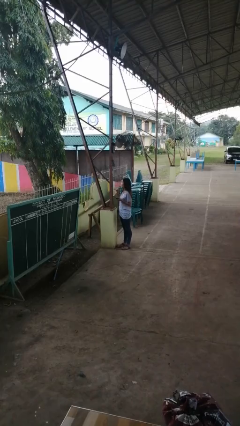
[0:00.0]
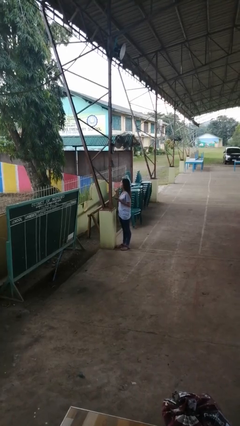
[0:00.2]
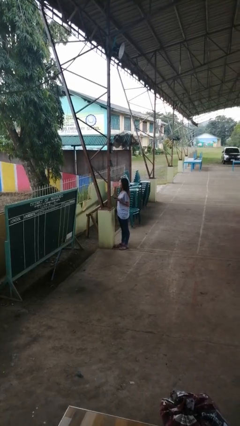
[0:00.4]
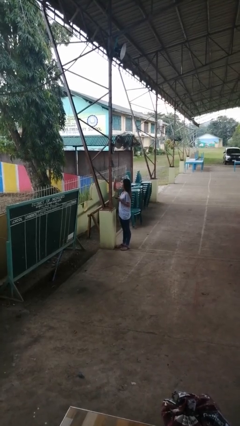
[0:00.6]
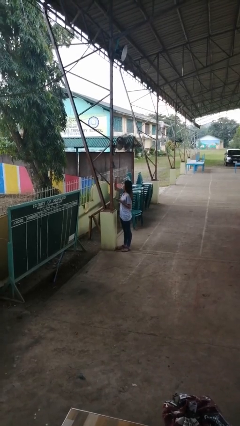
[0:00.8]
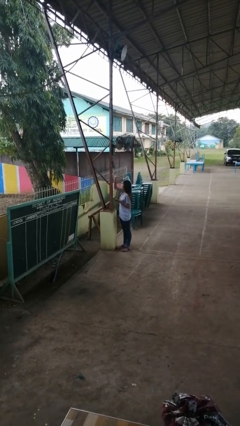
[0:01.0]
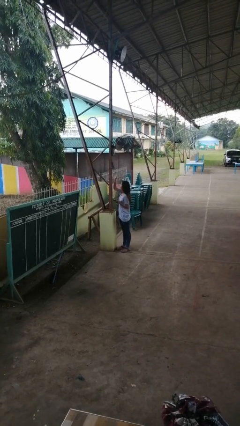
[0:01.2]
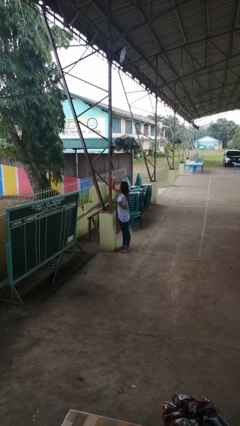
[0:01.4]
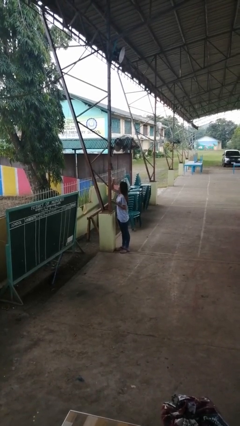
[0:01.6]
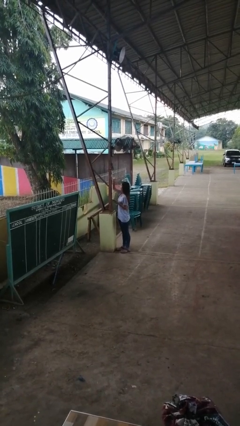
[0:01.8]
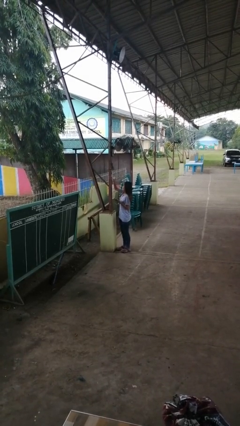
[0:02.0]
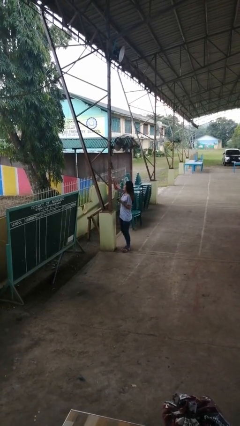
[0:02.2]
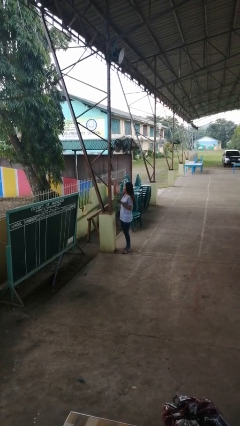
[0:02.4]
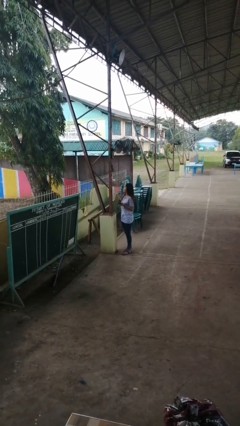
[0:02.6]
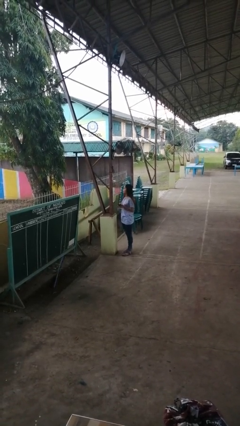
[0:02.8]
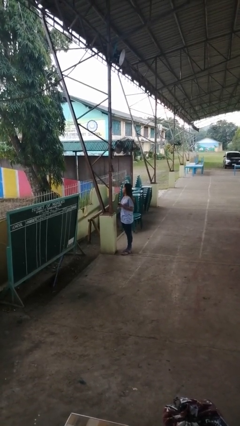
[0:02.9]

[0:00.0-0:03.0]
person plugs into electrical socket

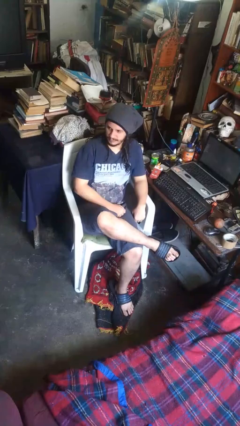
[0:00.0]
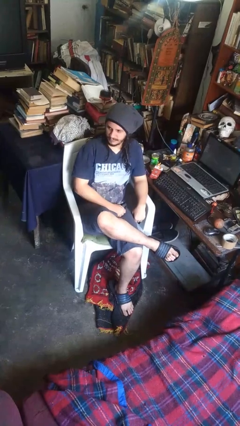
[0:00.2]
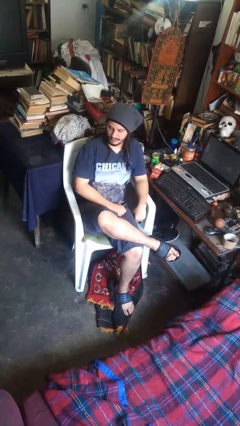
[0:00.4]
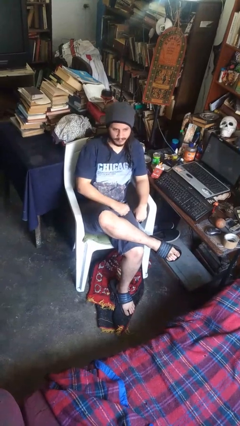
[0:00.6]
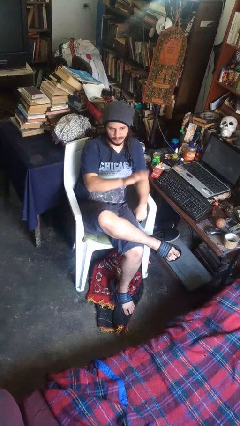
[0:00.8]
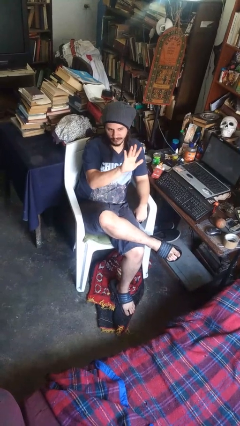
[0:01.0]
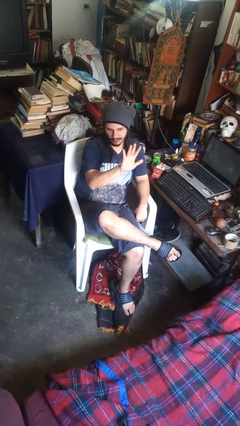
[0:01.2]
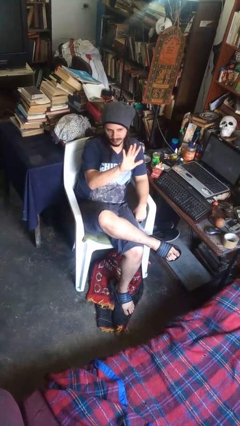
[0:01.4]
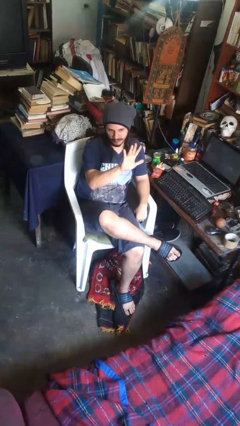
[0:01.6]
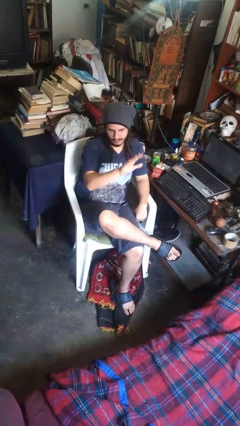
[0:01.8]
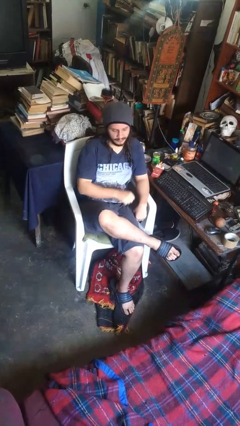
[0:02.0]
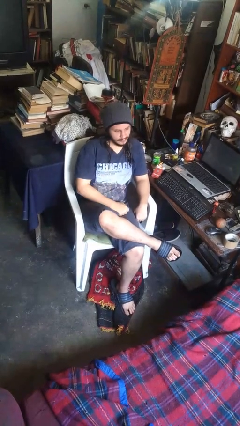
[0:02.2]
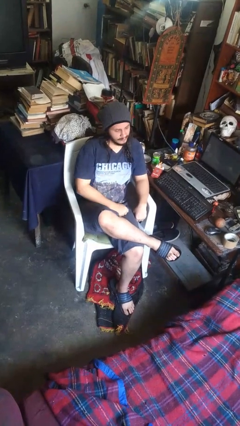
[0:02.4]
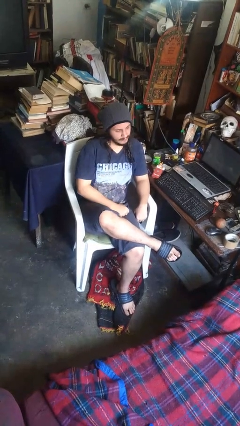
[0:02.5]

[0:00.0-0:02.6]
person gestures number five

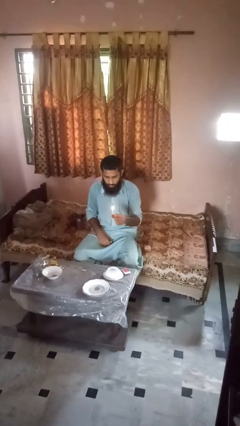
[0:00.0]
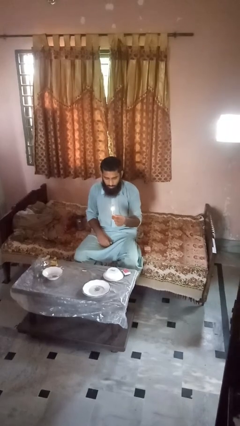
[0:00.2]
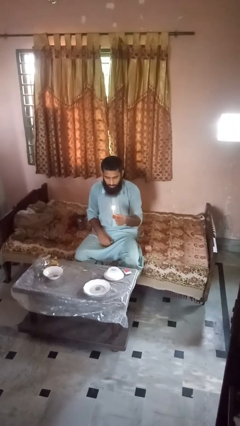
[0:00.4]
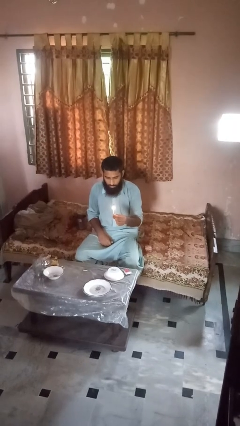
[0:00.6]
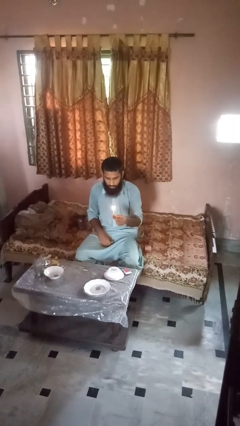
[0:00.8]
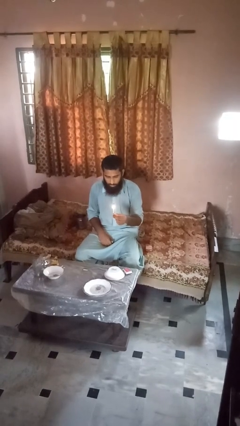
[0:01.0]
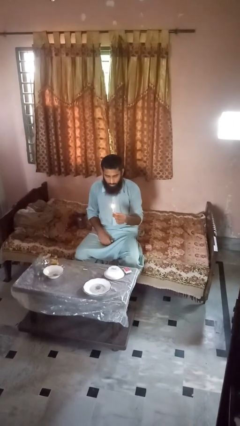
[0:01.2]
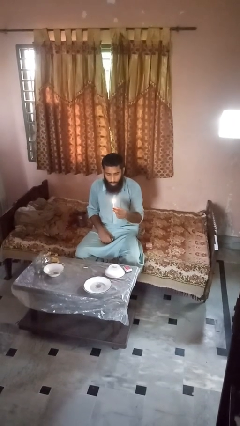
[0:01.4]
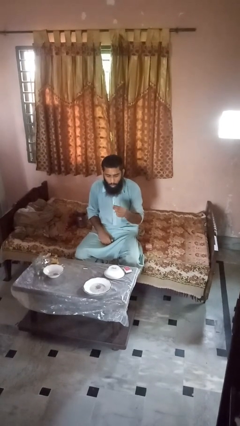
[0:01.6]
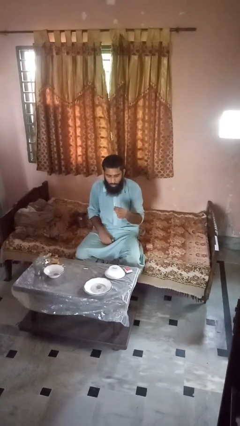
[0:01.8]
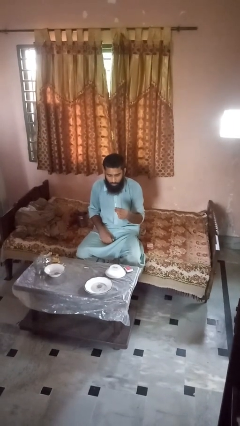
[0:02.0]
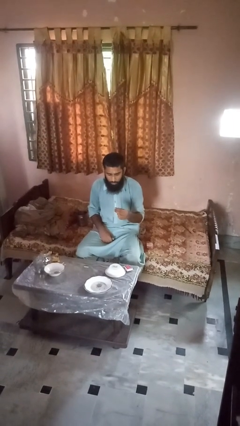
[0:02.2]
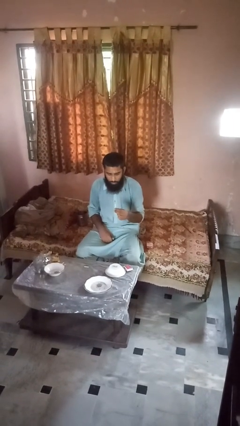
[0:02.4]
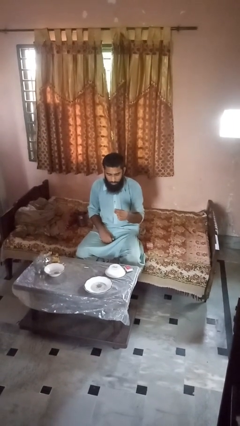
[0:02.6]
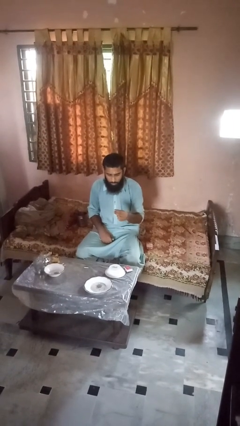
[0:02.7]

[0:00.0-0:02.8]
person extinguishes candle

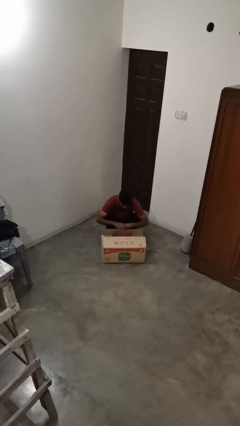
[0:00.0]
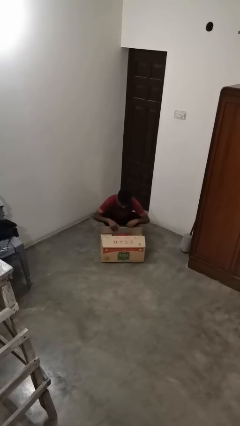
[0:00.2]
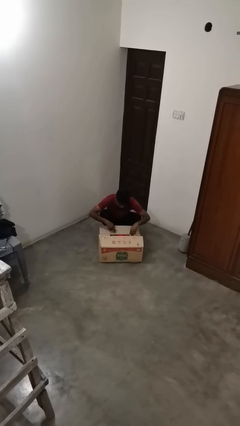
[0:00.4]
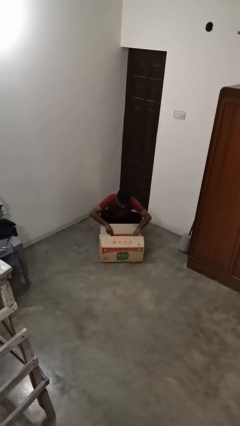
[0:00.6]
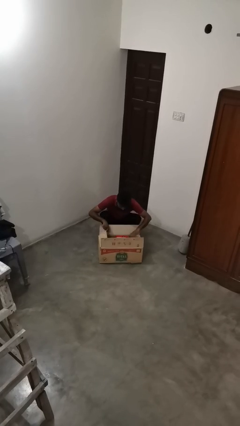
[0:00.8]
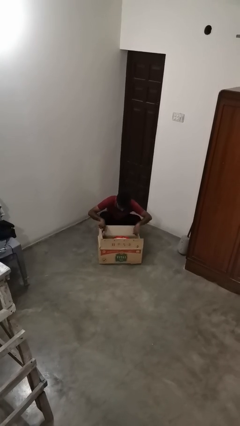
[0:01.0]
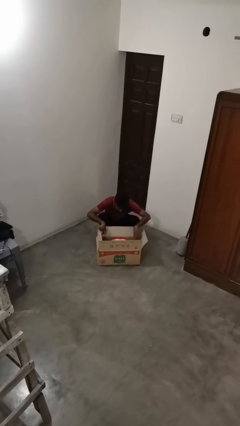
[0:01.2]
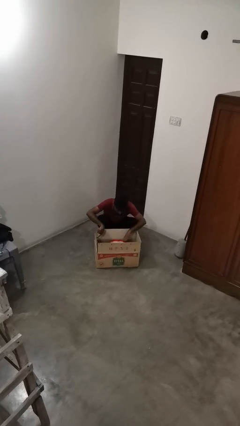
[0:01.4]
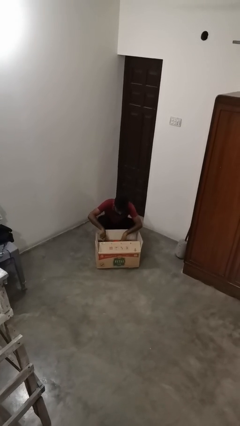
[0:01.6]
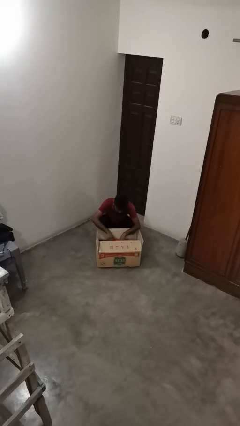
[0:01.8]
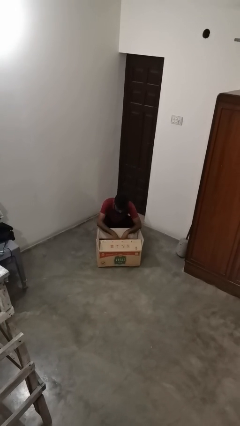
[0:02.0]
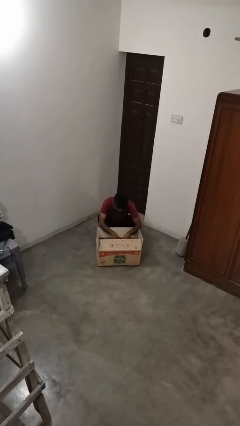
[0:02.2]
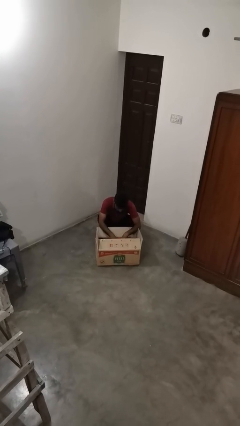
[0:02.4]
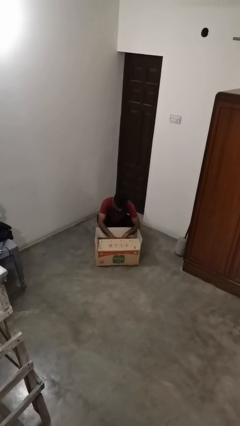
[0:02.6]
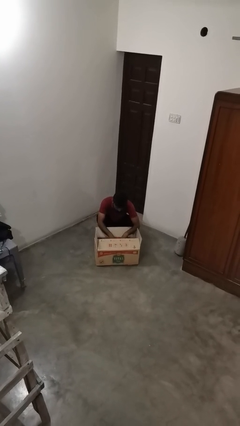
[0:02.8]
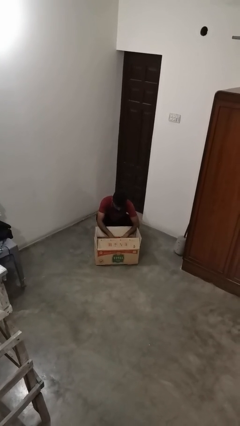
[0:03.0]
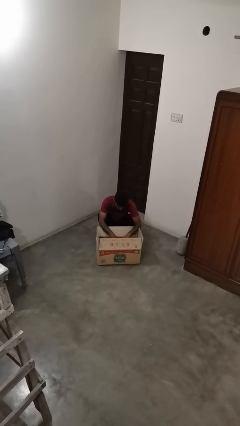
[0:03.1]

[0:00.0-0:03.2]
person searches in box

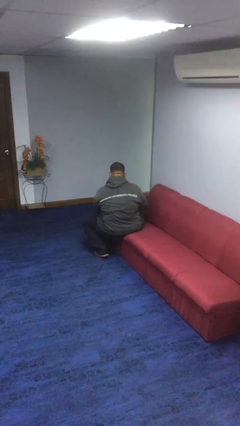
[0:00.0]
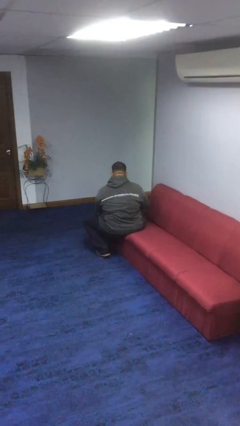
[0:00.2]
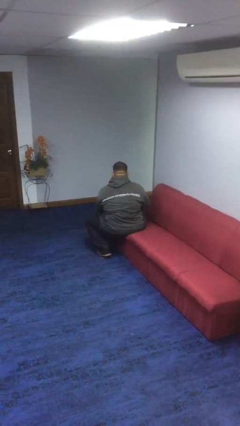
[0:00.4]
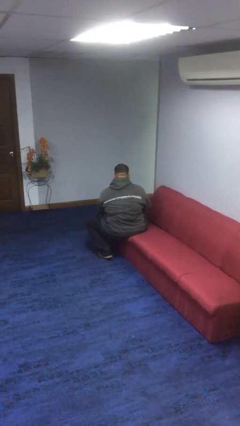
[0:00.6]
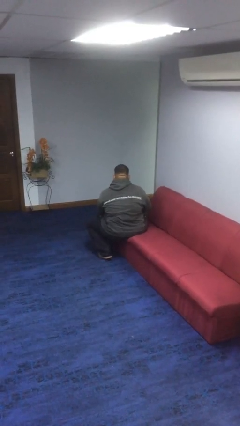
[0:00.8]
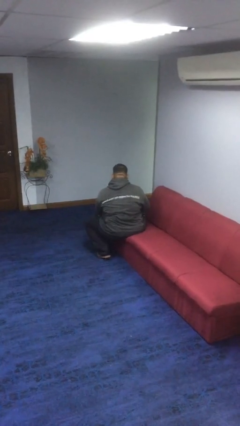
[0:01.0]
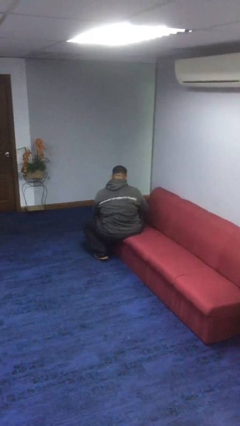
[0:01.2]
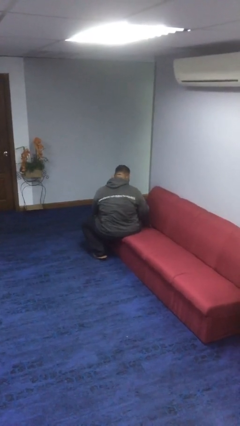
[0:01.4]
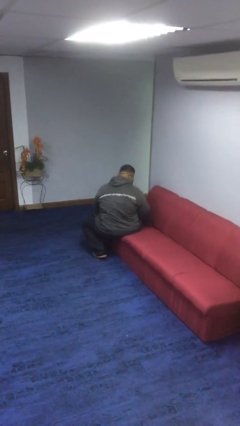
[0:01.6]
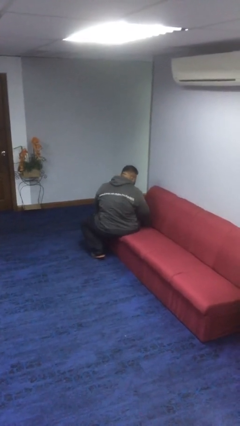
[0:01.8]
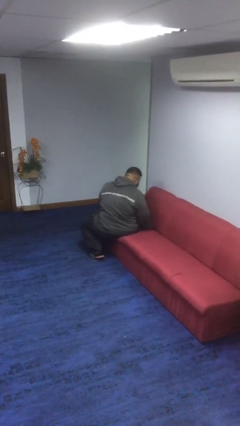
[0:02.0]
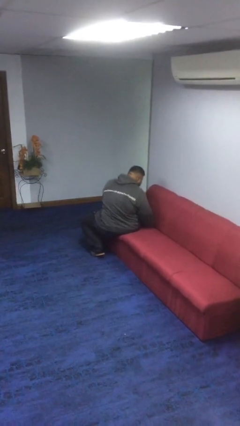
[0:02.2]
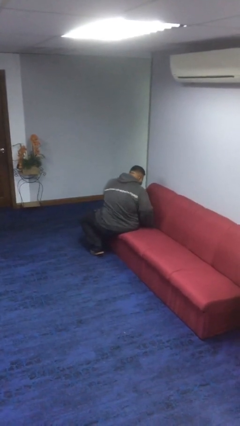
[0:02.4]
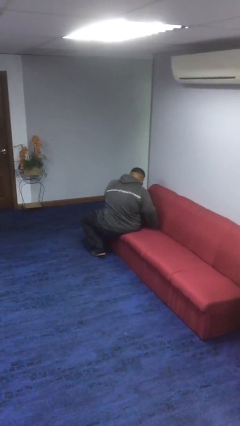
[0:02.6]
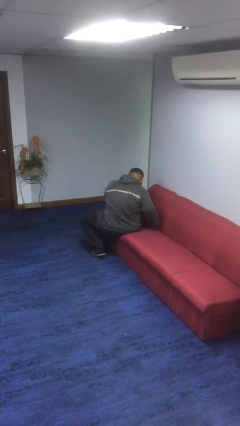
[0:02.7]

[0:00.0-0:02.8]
person searches in couch

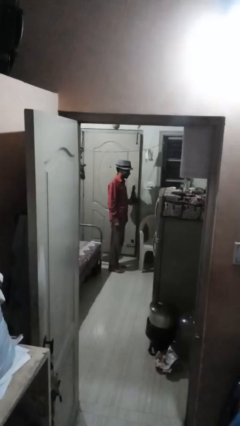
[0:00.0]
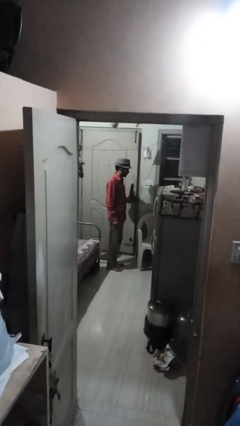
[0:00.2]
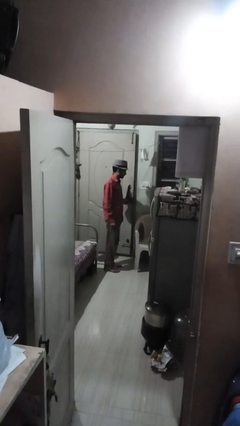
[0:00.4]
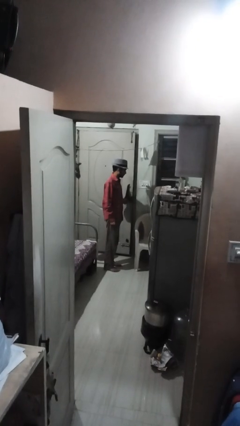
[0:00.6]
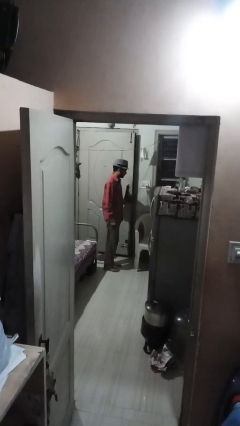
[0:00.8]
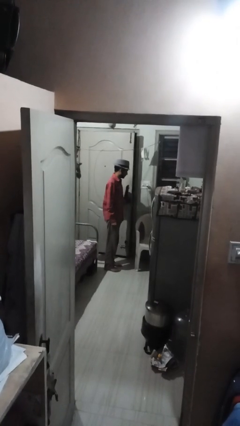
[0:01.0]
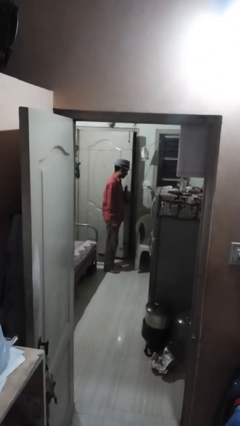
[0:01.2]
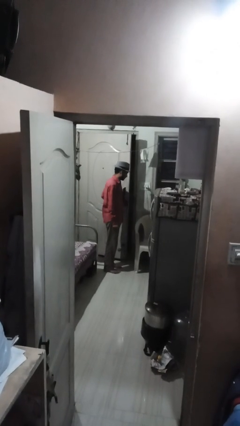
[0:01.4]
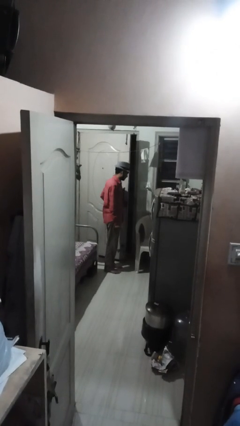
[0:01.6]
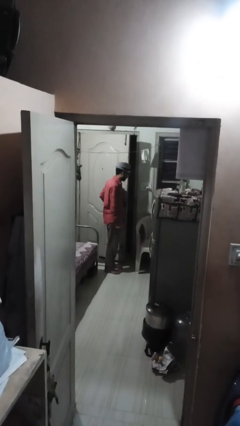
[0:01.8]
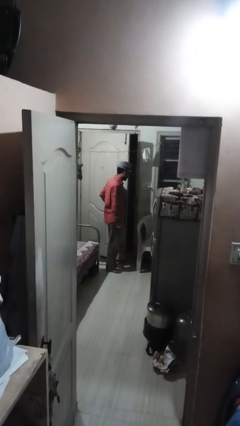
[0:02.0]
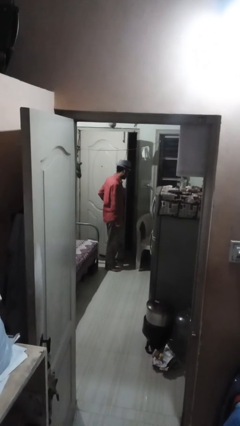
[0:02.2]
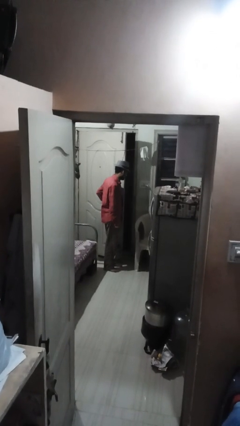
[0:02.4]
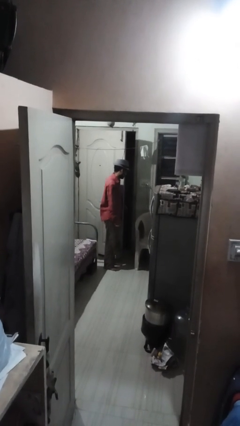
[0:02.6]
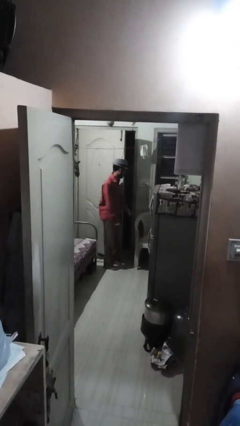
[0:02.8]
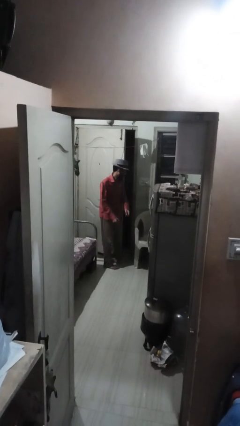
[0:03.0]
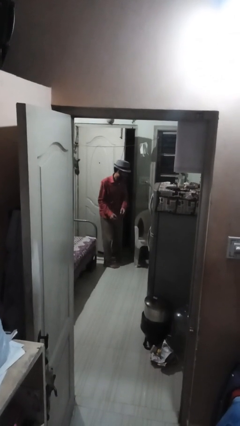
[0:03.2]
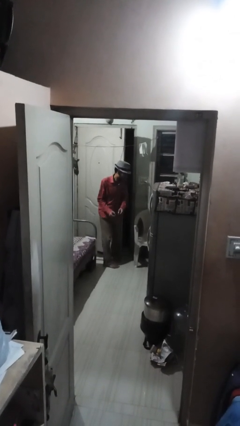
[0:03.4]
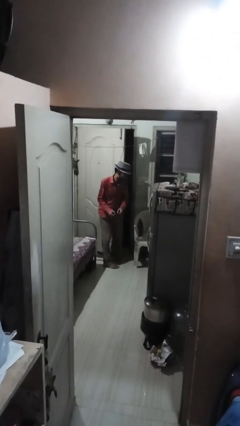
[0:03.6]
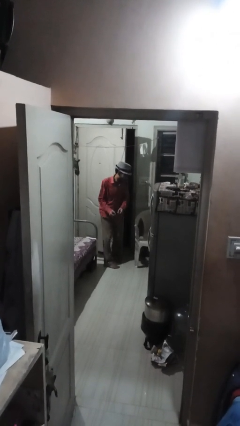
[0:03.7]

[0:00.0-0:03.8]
person opens facility door
